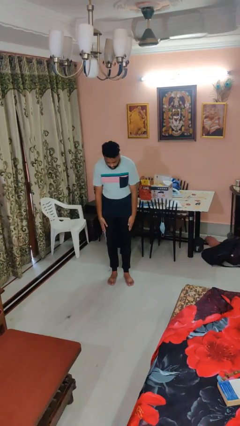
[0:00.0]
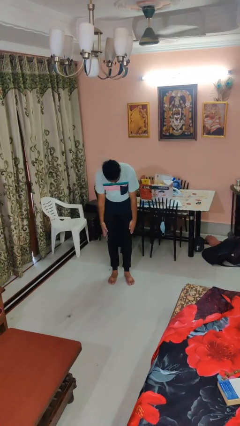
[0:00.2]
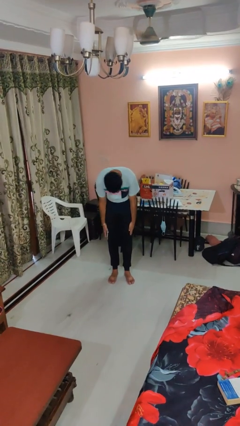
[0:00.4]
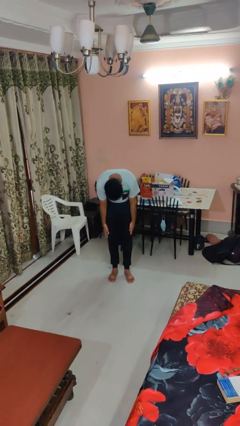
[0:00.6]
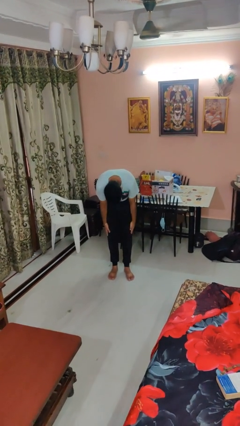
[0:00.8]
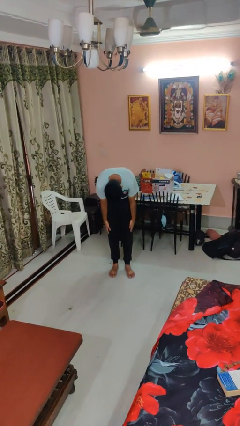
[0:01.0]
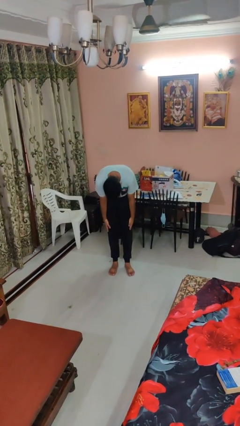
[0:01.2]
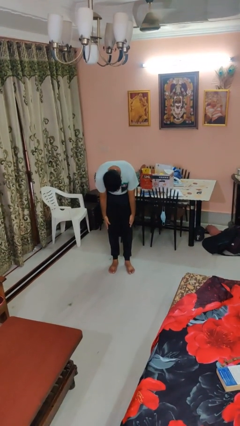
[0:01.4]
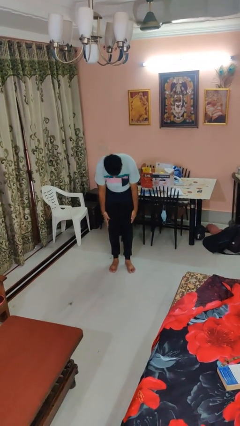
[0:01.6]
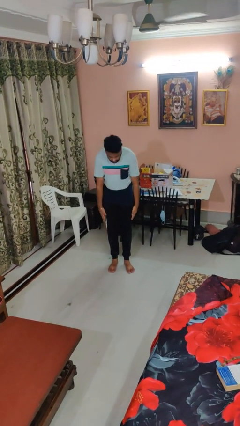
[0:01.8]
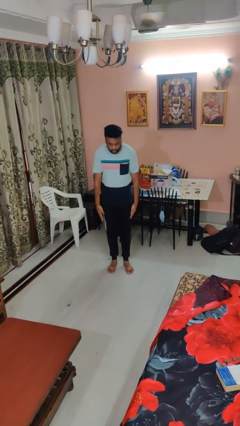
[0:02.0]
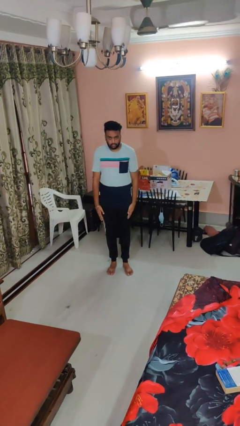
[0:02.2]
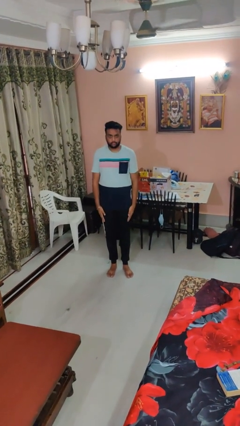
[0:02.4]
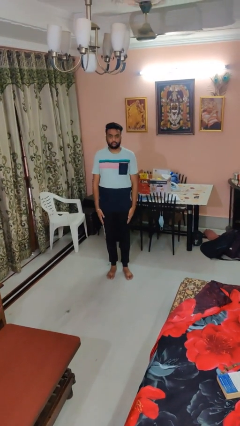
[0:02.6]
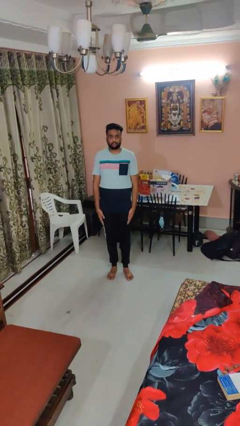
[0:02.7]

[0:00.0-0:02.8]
person bows

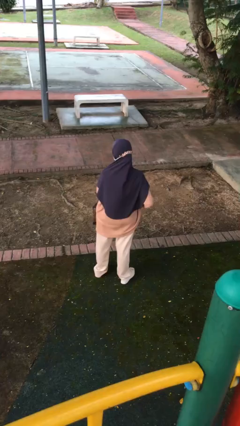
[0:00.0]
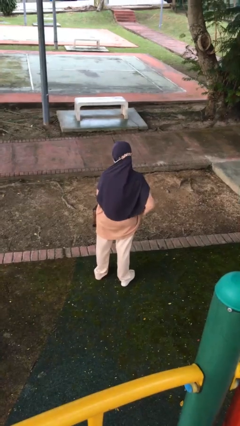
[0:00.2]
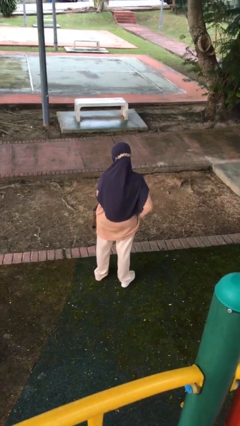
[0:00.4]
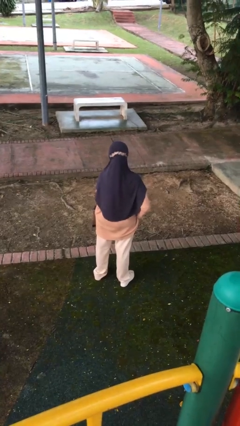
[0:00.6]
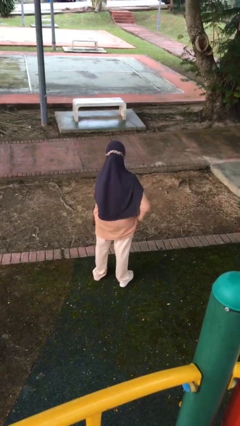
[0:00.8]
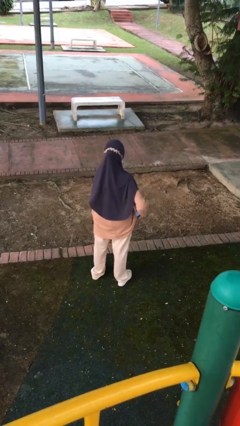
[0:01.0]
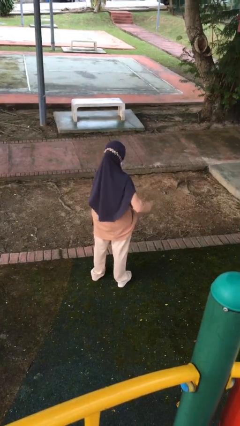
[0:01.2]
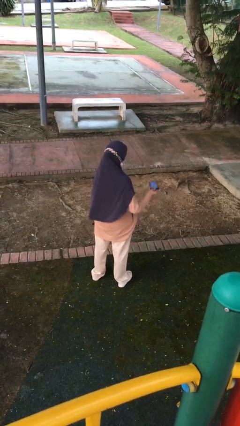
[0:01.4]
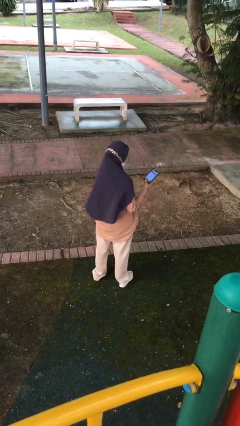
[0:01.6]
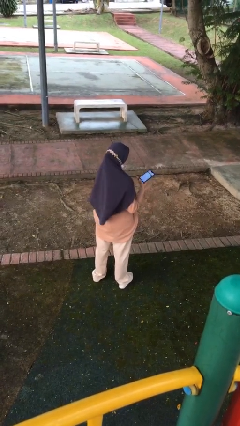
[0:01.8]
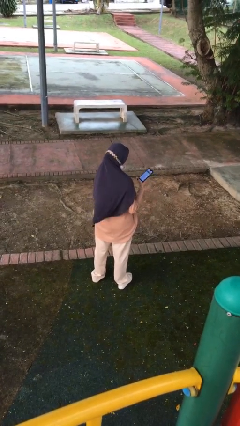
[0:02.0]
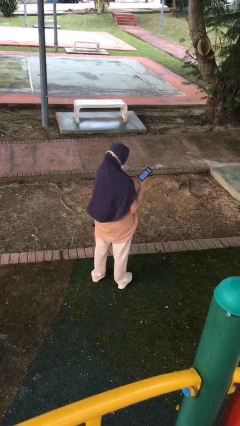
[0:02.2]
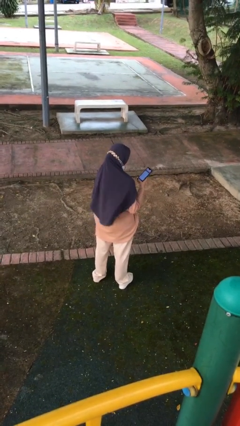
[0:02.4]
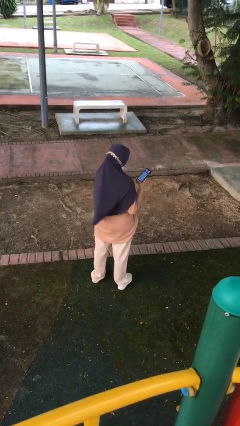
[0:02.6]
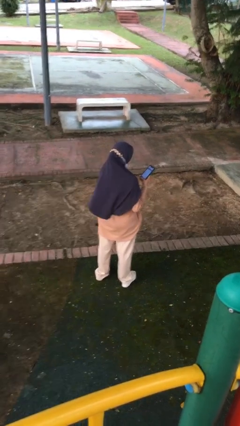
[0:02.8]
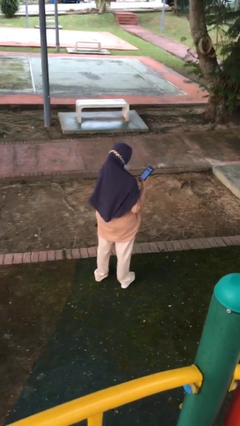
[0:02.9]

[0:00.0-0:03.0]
person takes phone from pocket

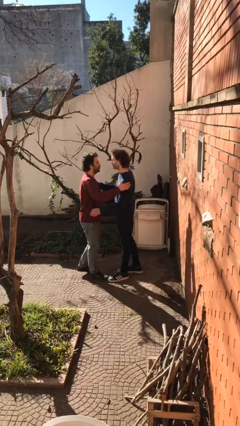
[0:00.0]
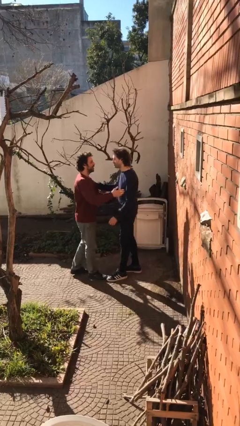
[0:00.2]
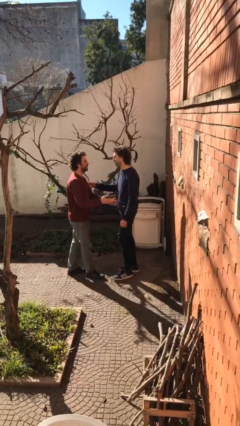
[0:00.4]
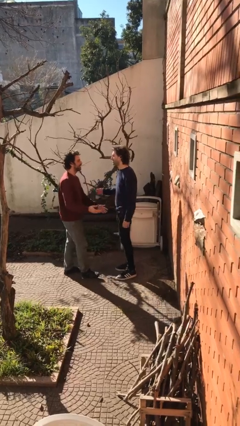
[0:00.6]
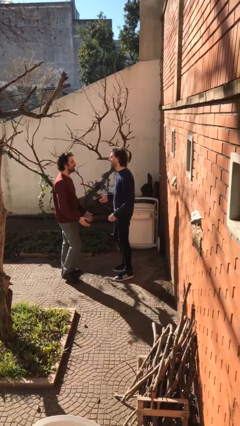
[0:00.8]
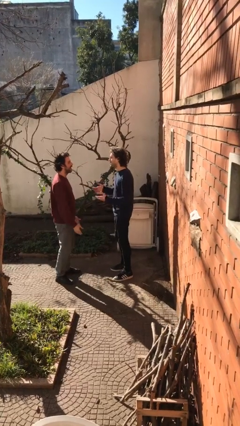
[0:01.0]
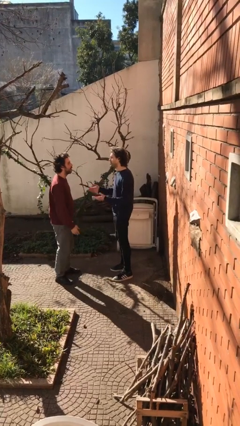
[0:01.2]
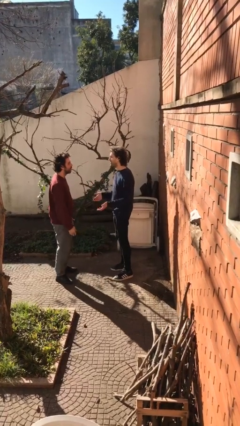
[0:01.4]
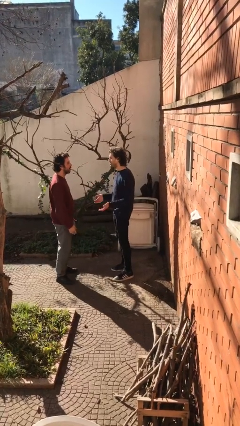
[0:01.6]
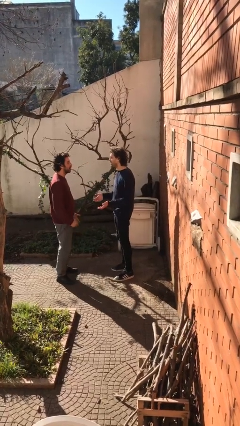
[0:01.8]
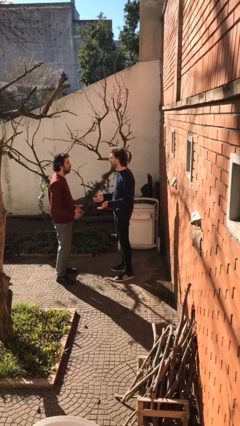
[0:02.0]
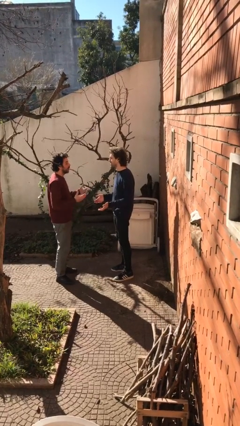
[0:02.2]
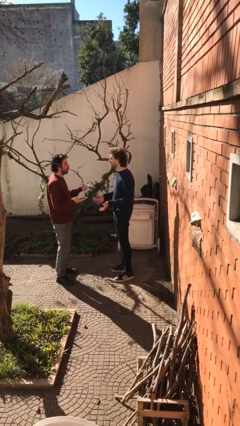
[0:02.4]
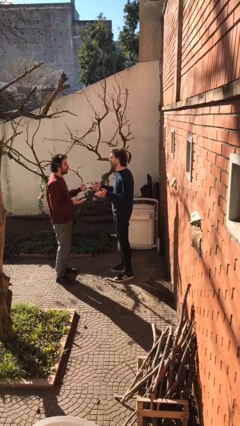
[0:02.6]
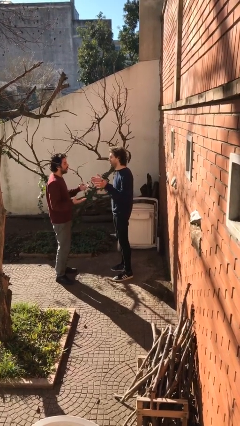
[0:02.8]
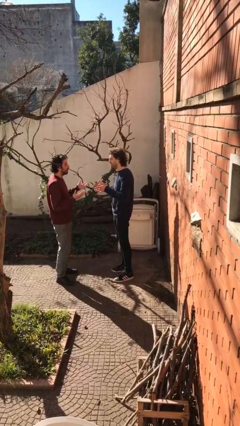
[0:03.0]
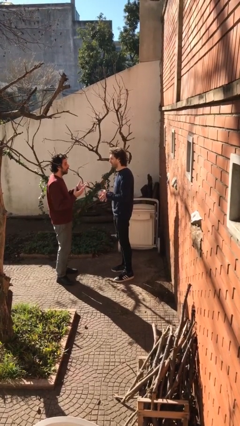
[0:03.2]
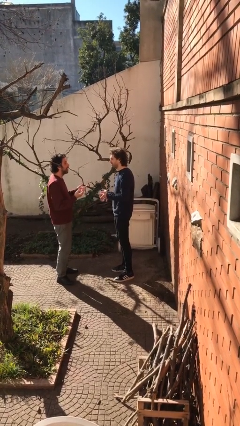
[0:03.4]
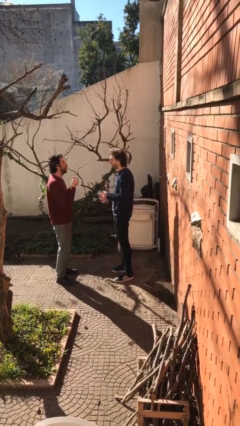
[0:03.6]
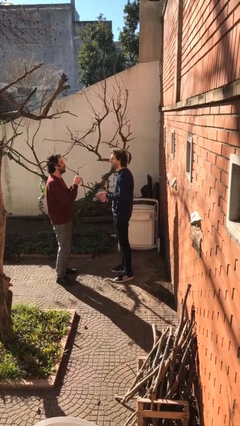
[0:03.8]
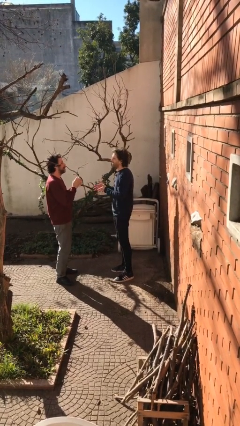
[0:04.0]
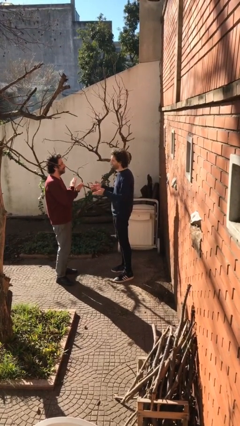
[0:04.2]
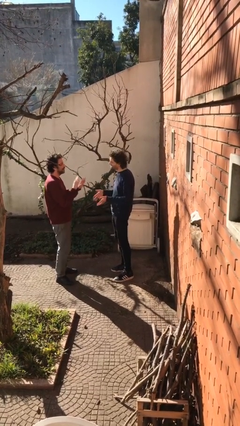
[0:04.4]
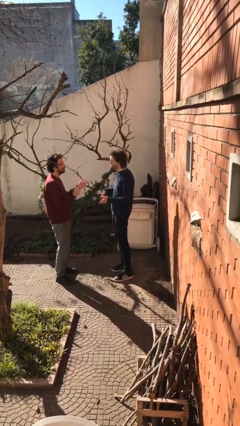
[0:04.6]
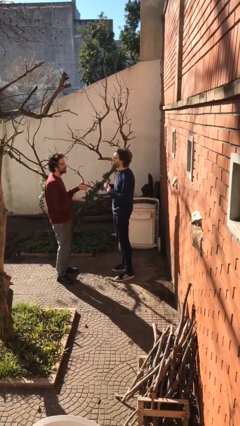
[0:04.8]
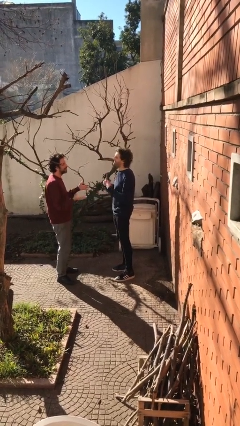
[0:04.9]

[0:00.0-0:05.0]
person talks to person

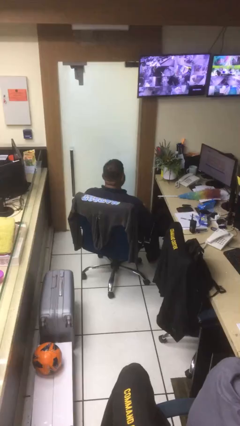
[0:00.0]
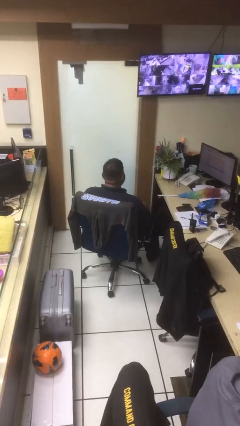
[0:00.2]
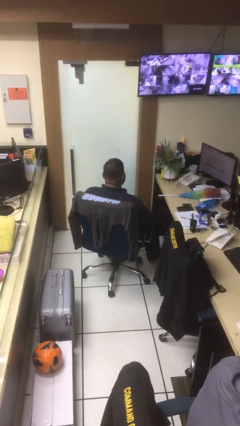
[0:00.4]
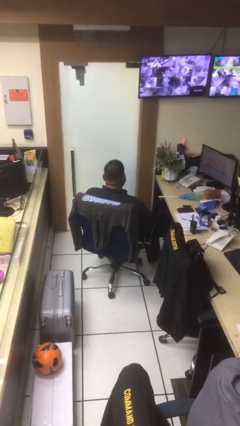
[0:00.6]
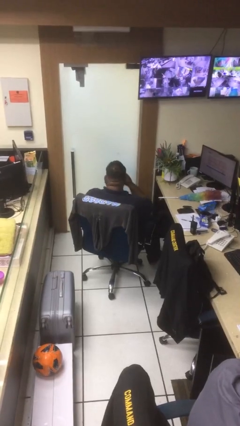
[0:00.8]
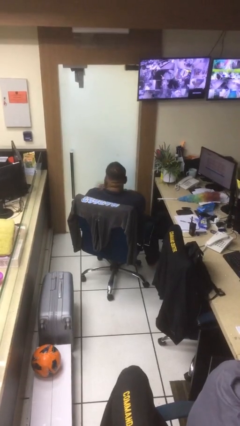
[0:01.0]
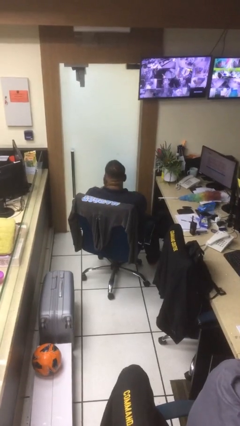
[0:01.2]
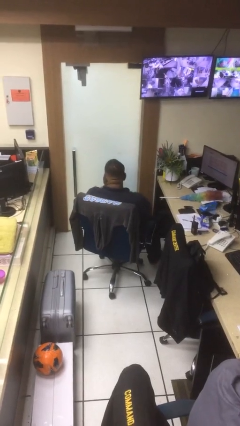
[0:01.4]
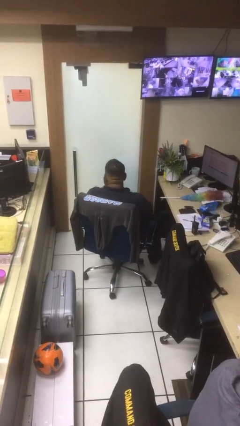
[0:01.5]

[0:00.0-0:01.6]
person swats bug

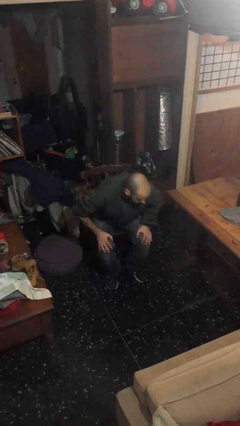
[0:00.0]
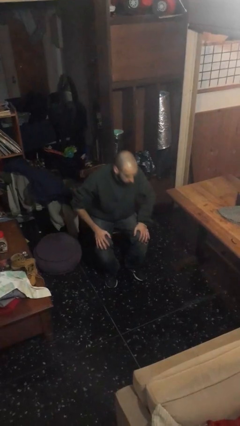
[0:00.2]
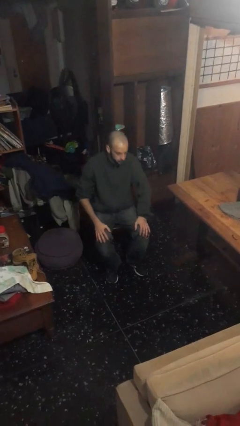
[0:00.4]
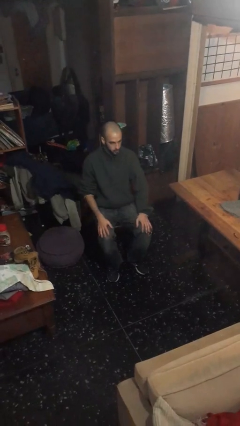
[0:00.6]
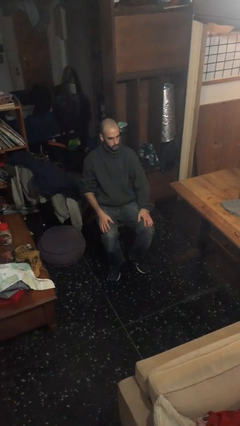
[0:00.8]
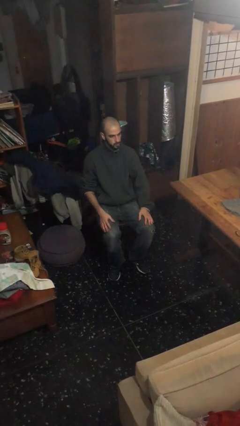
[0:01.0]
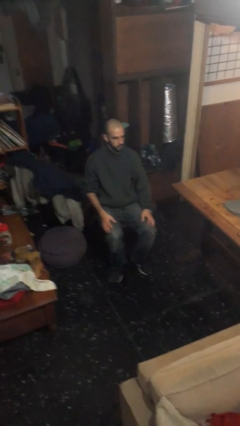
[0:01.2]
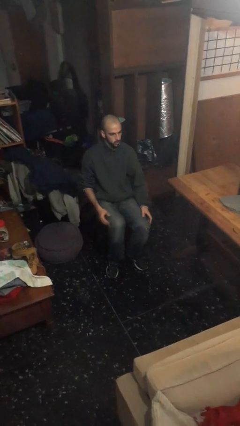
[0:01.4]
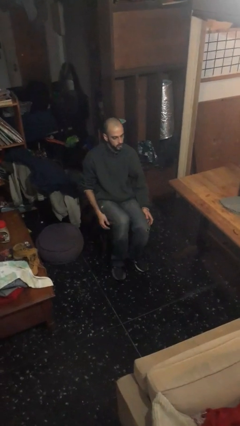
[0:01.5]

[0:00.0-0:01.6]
person sits down

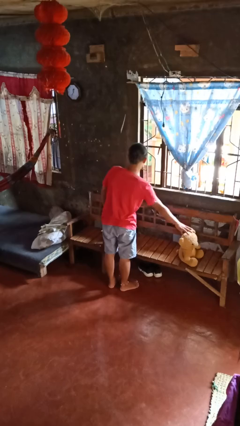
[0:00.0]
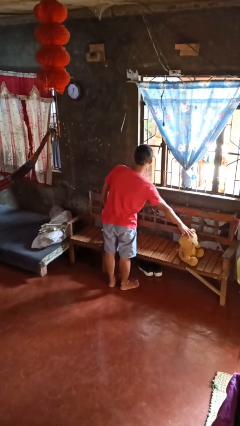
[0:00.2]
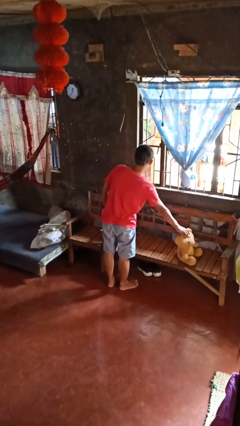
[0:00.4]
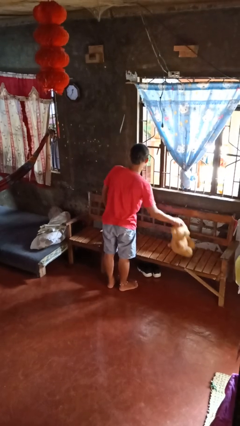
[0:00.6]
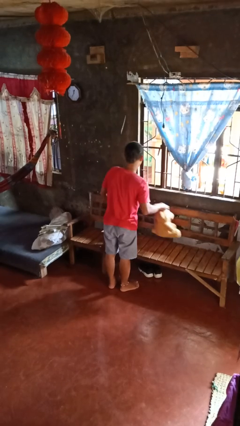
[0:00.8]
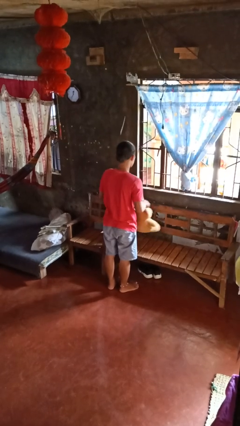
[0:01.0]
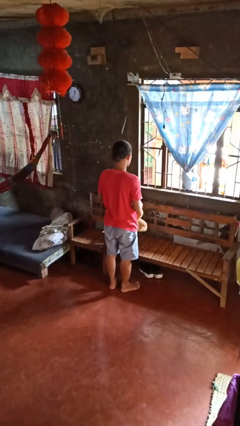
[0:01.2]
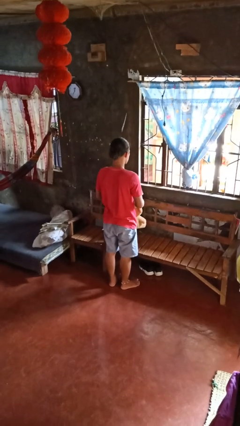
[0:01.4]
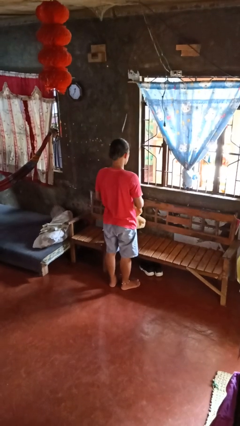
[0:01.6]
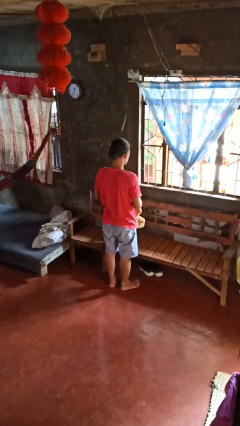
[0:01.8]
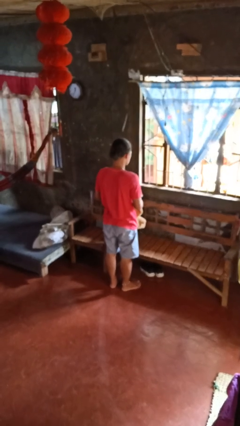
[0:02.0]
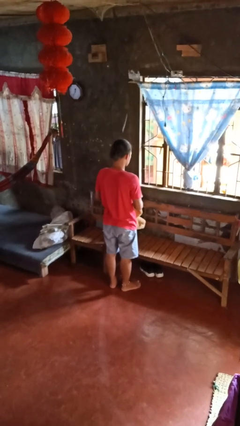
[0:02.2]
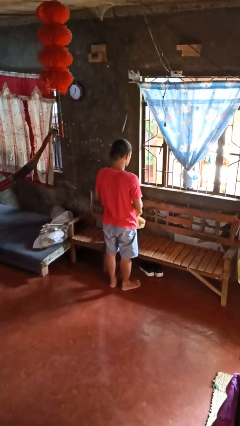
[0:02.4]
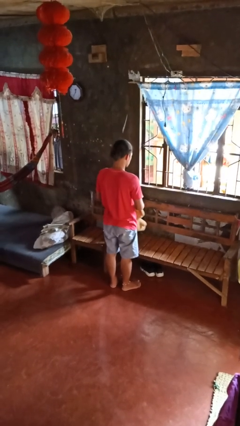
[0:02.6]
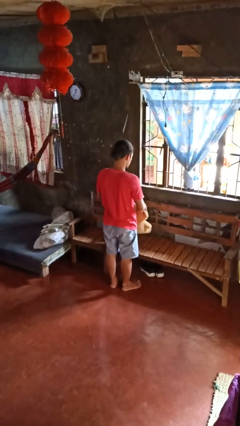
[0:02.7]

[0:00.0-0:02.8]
person picks up object from couch
